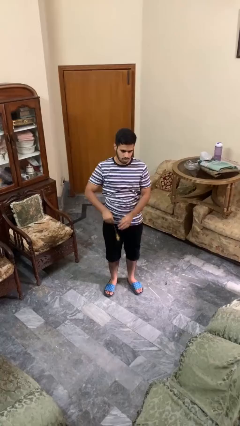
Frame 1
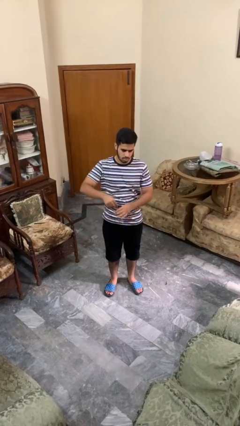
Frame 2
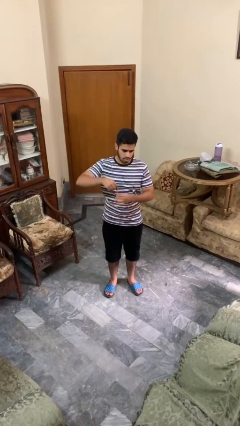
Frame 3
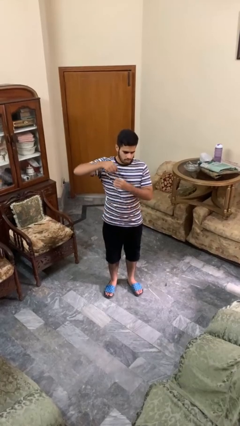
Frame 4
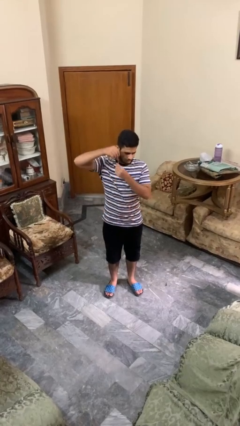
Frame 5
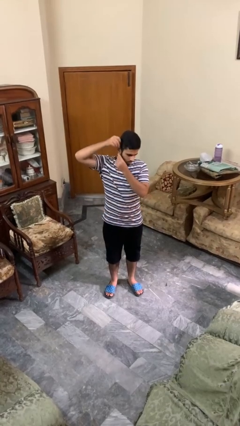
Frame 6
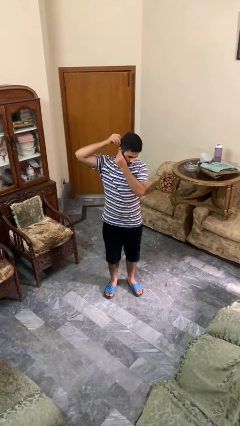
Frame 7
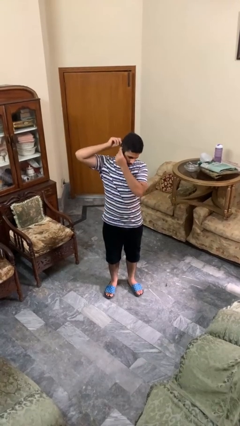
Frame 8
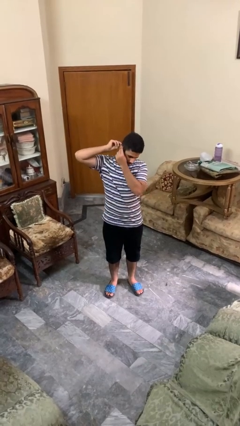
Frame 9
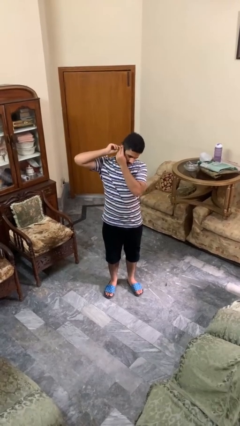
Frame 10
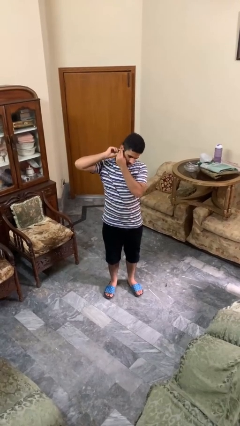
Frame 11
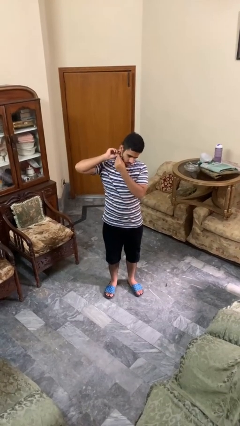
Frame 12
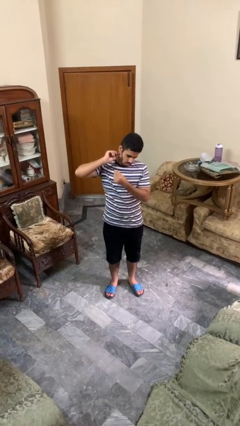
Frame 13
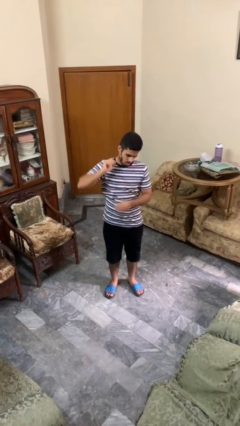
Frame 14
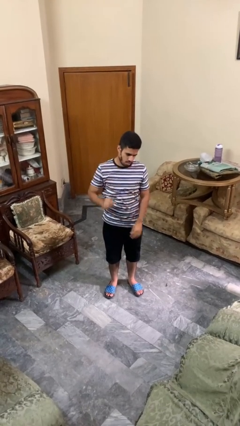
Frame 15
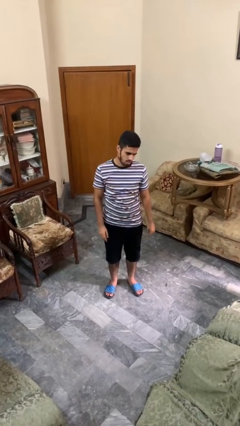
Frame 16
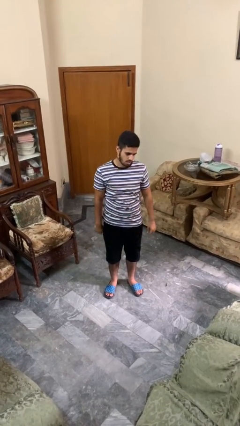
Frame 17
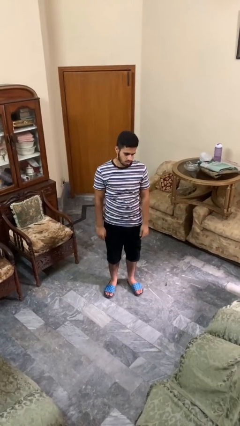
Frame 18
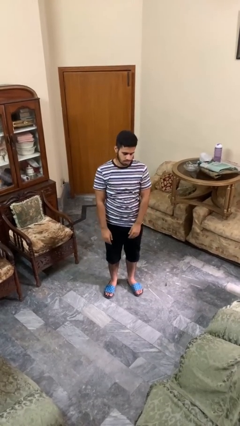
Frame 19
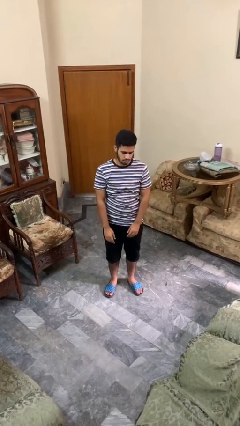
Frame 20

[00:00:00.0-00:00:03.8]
person puts on earrings

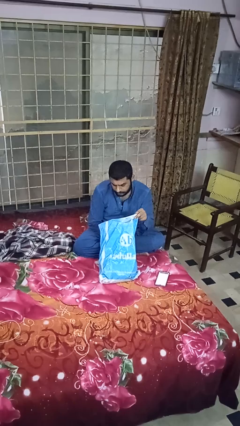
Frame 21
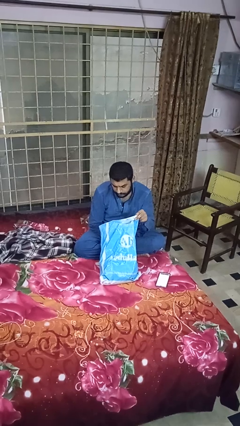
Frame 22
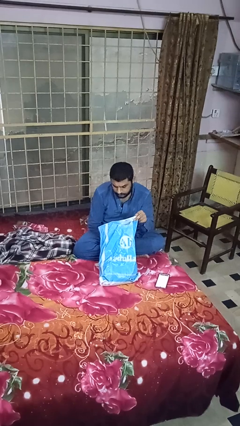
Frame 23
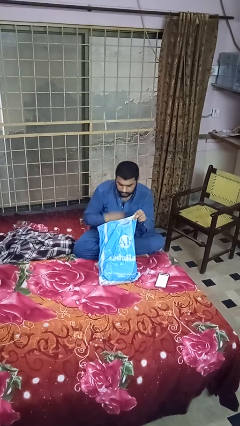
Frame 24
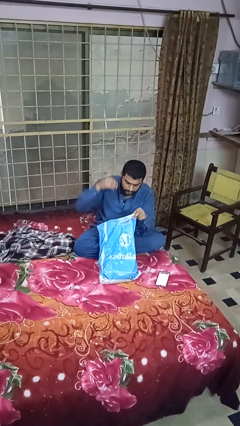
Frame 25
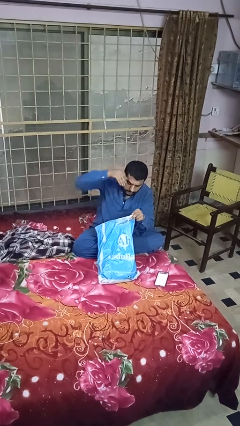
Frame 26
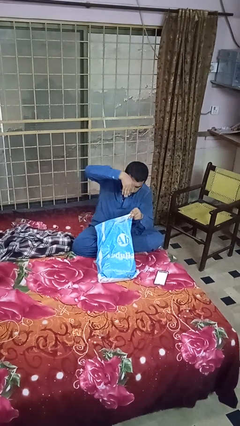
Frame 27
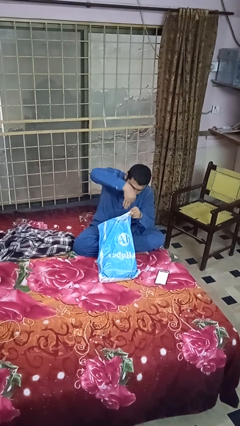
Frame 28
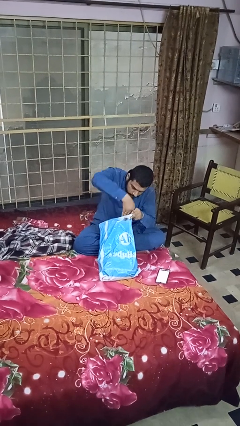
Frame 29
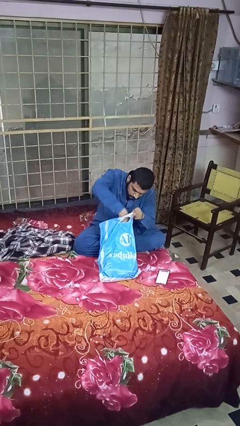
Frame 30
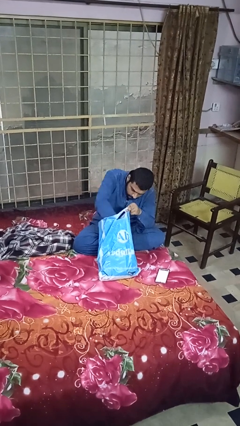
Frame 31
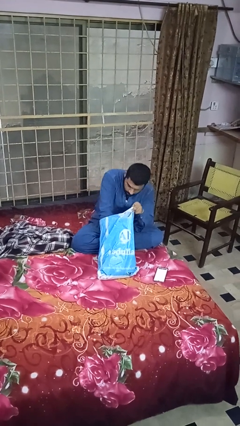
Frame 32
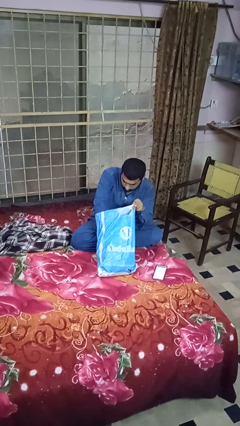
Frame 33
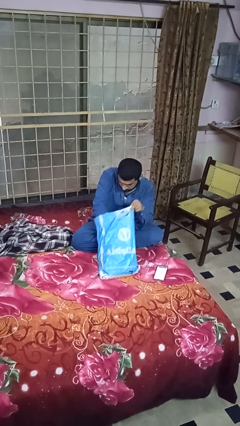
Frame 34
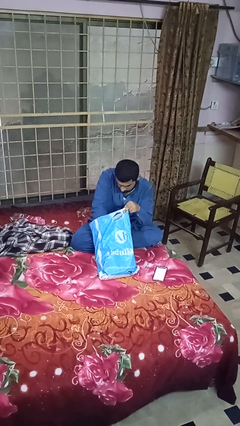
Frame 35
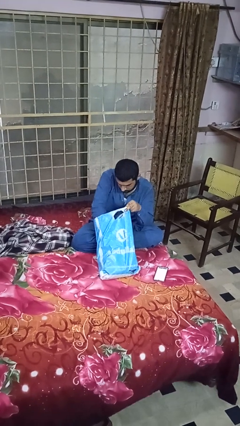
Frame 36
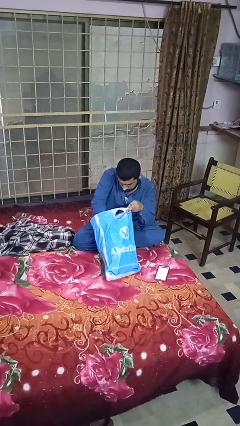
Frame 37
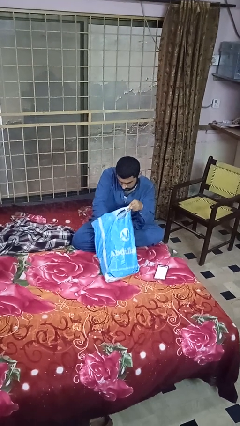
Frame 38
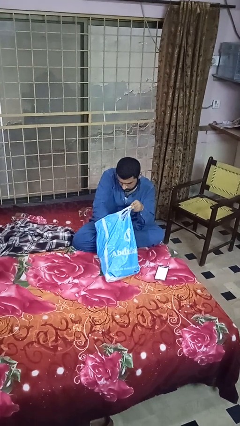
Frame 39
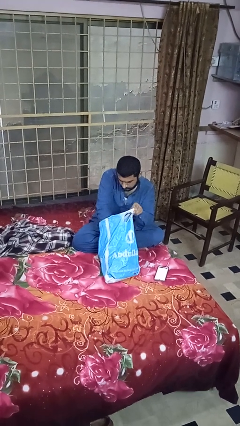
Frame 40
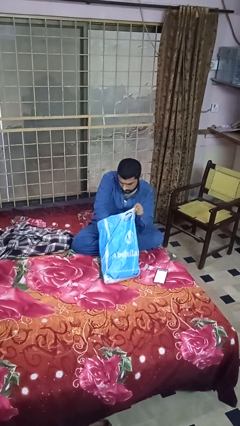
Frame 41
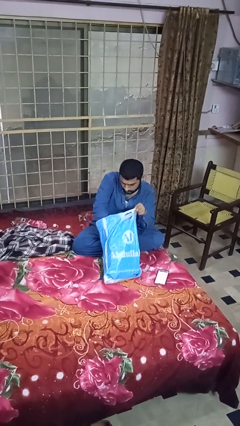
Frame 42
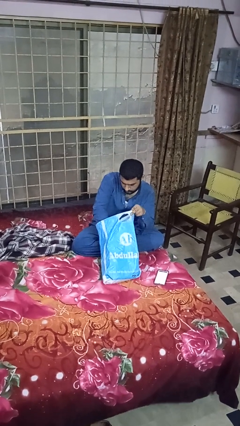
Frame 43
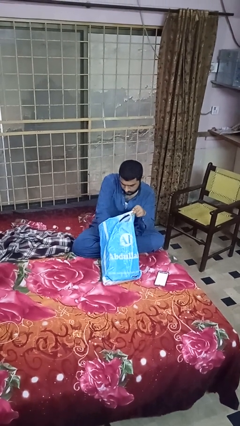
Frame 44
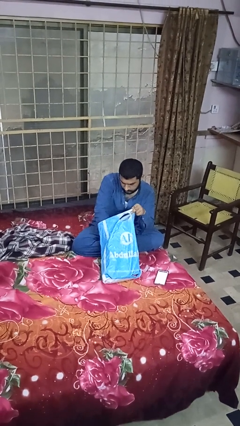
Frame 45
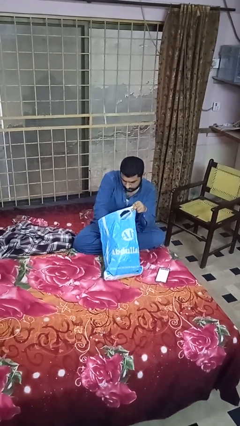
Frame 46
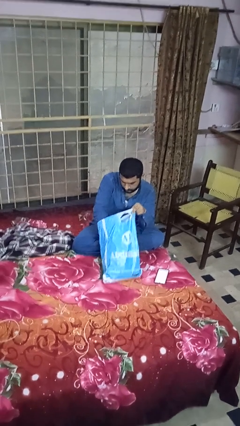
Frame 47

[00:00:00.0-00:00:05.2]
person searches in bag

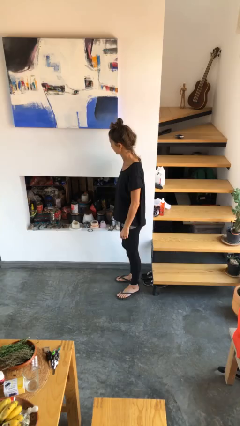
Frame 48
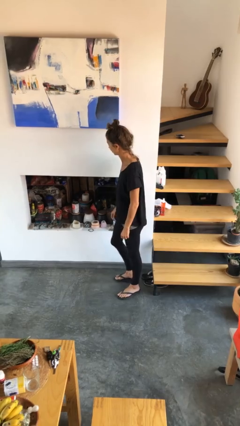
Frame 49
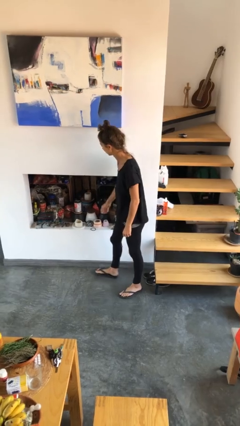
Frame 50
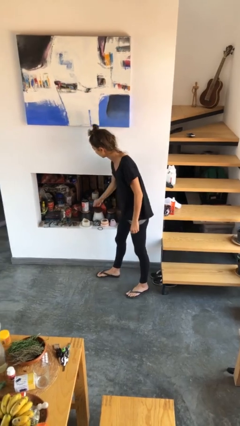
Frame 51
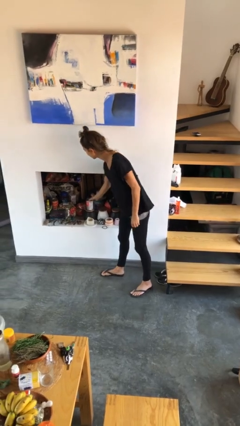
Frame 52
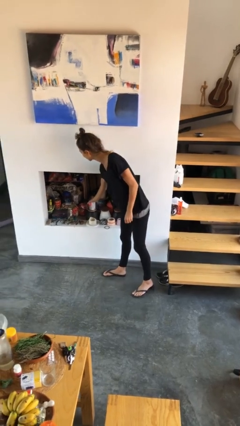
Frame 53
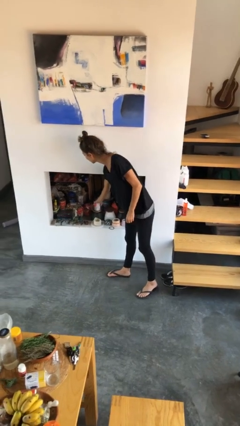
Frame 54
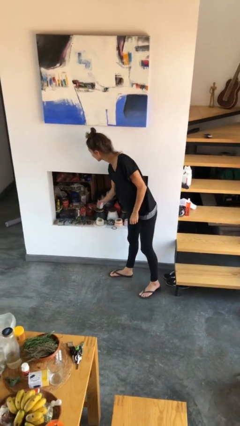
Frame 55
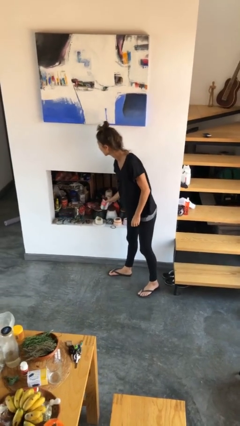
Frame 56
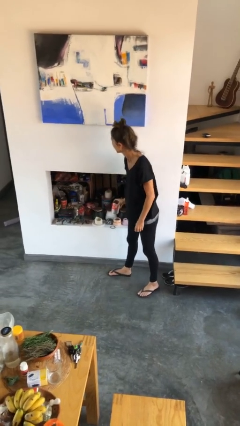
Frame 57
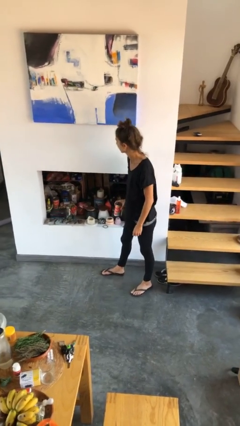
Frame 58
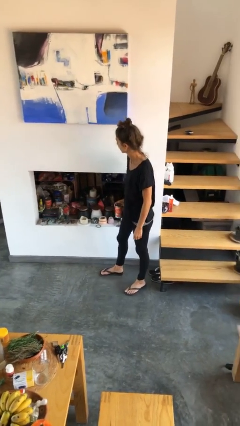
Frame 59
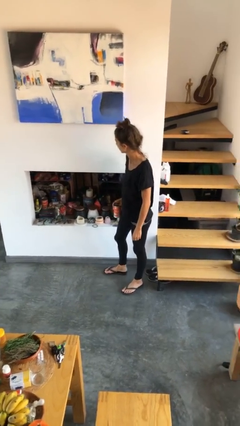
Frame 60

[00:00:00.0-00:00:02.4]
person picks up object from cabinet

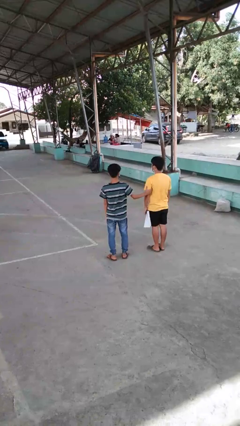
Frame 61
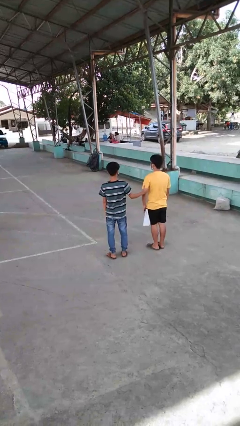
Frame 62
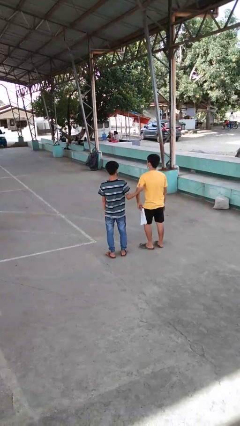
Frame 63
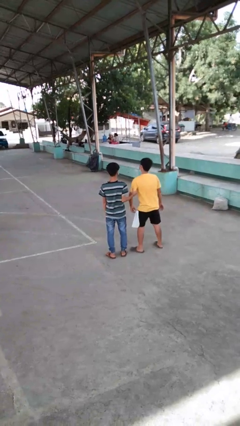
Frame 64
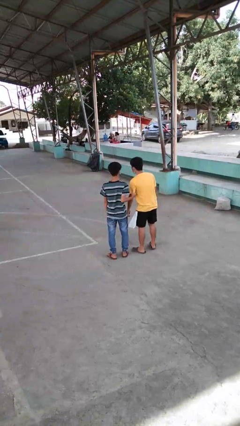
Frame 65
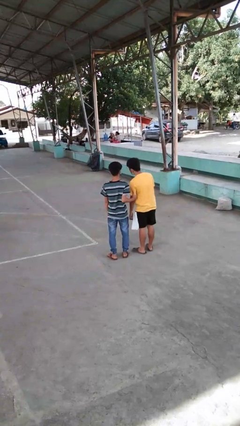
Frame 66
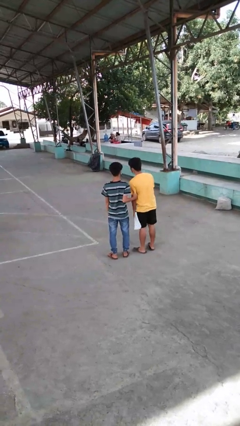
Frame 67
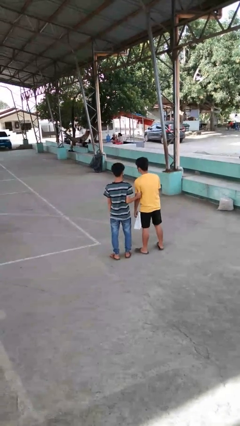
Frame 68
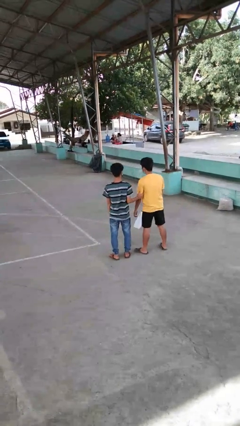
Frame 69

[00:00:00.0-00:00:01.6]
person grabs person by bicep

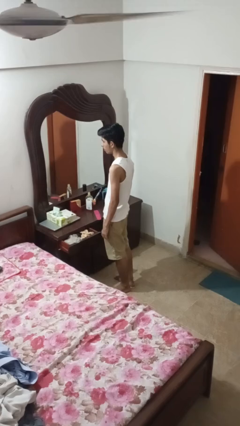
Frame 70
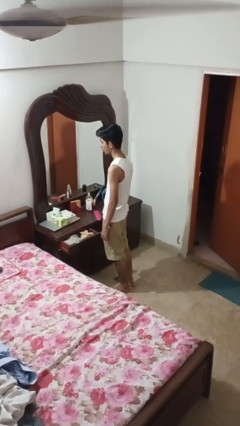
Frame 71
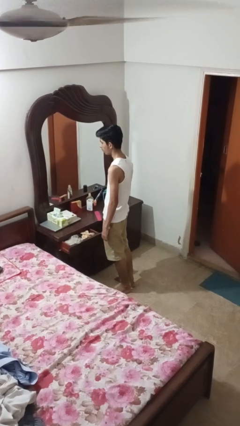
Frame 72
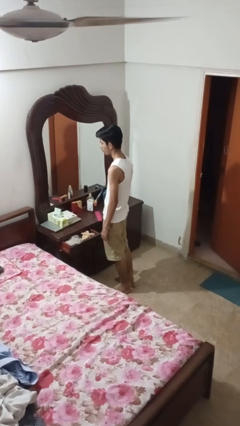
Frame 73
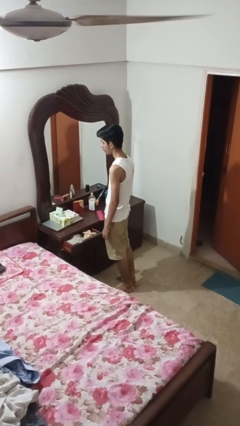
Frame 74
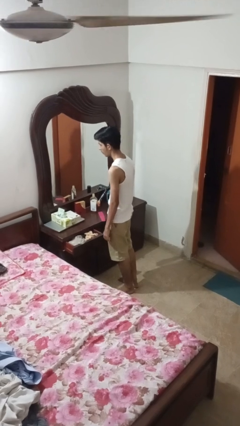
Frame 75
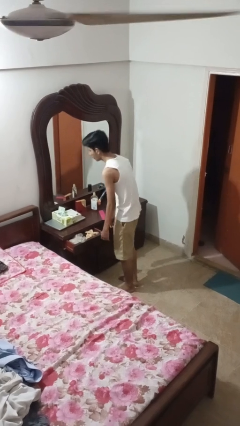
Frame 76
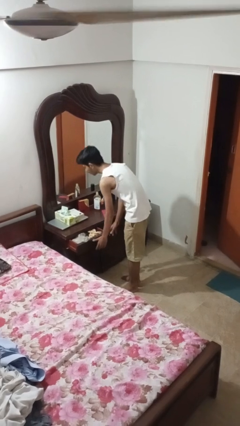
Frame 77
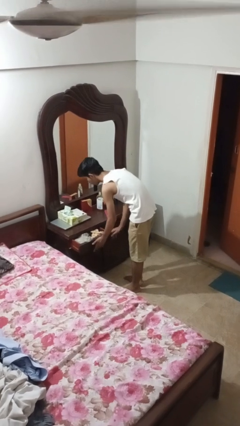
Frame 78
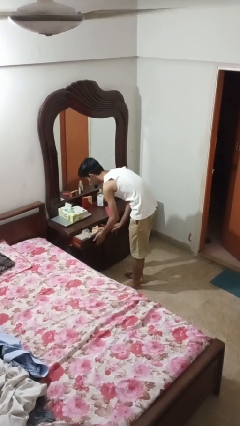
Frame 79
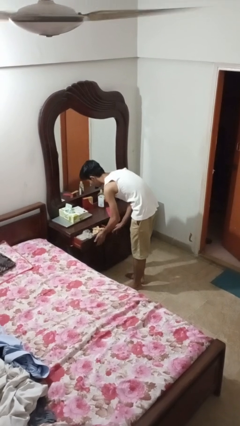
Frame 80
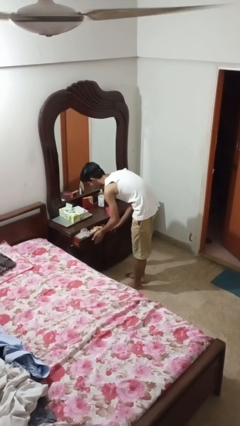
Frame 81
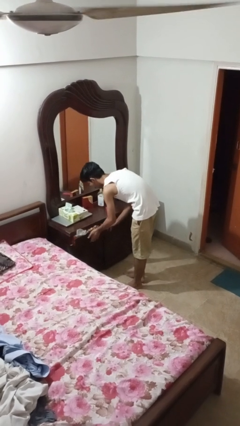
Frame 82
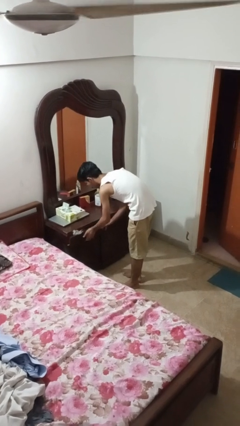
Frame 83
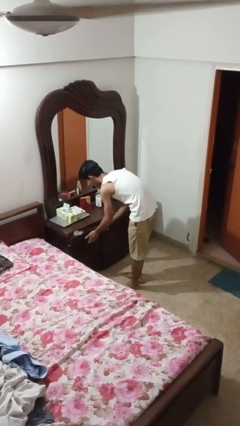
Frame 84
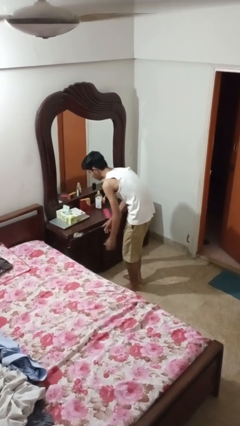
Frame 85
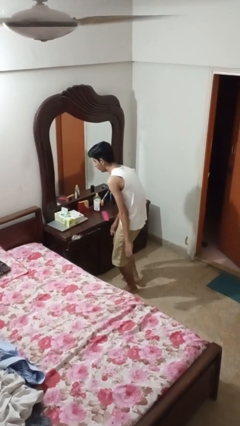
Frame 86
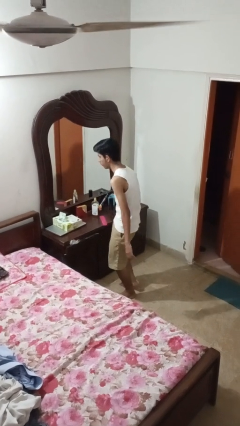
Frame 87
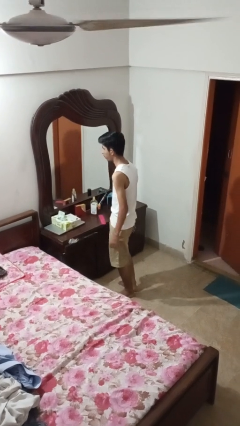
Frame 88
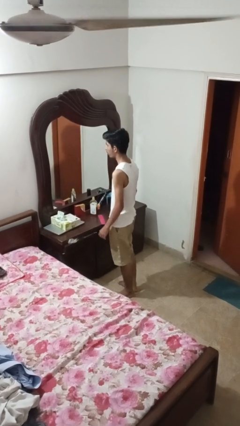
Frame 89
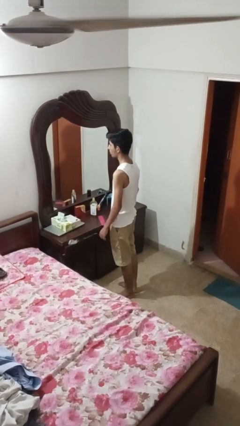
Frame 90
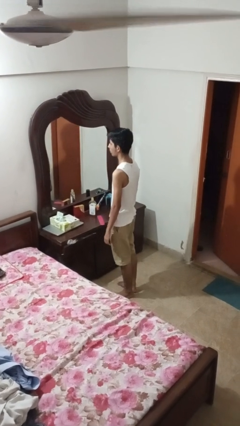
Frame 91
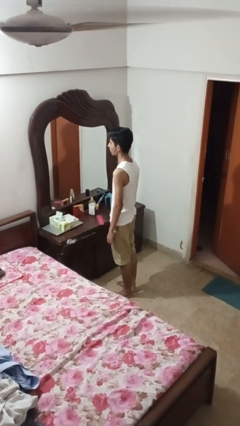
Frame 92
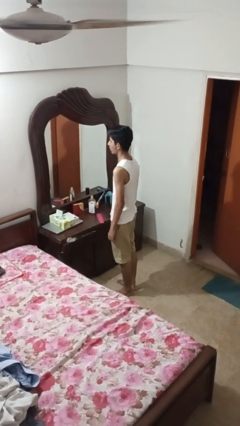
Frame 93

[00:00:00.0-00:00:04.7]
person closes dresser drawer

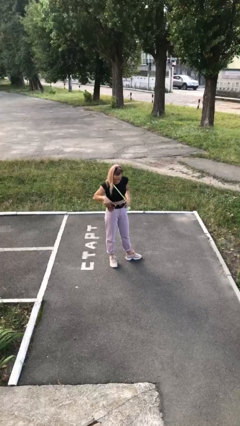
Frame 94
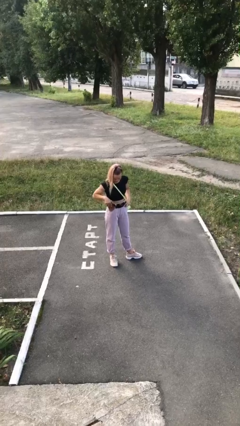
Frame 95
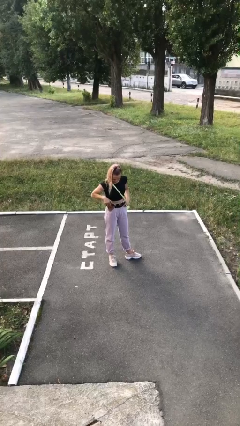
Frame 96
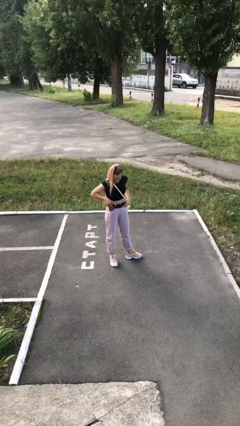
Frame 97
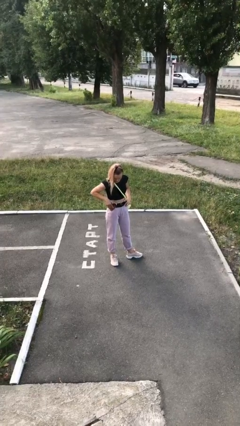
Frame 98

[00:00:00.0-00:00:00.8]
person puts phone into pocket
